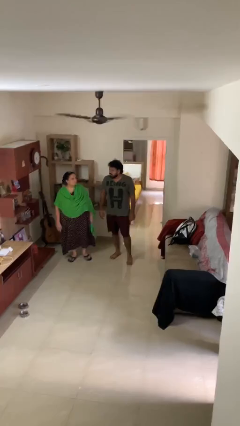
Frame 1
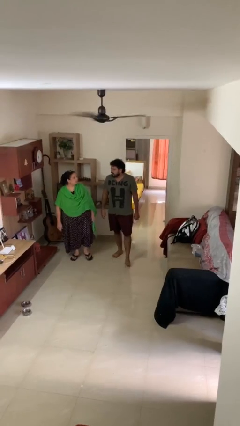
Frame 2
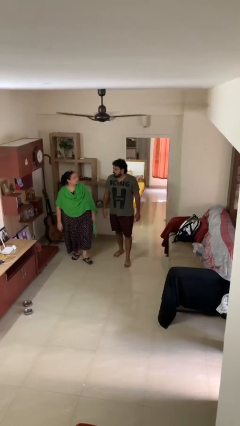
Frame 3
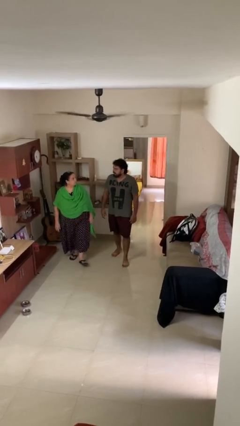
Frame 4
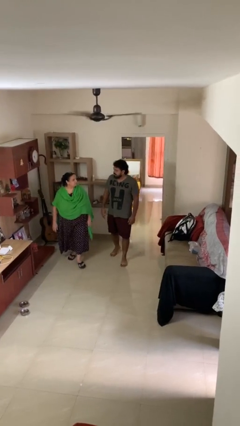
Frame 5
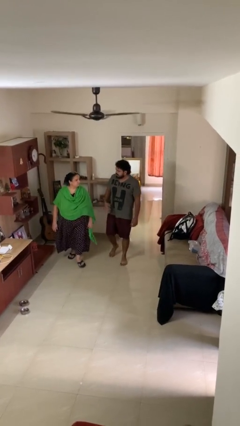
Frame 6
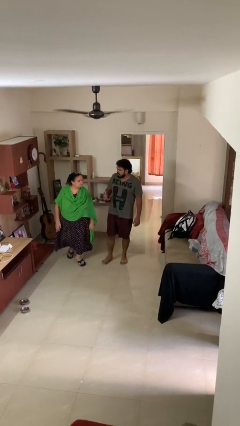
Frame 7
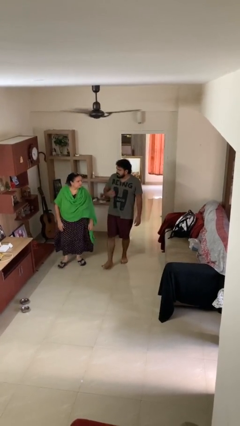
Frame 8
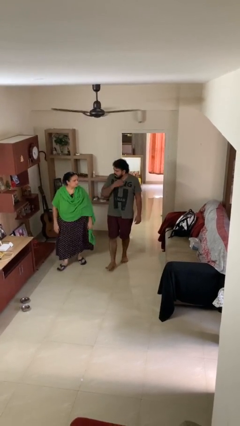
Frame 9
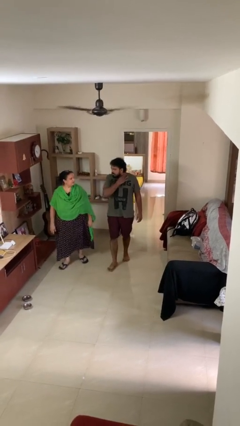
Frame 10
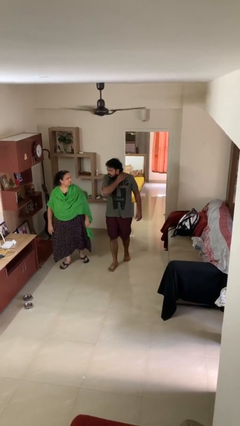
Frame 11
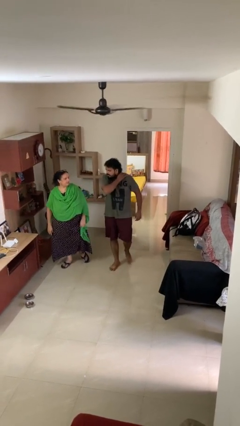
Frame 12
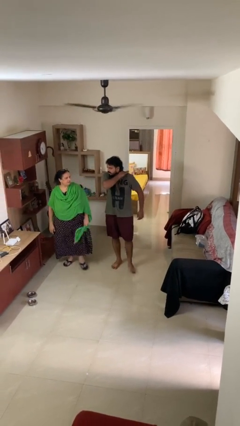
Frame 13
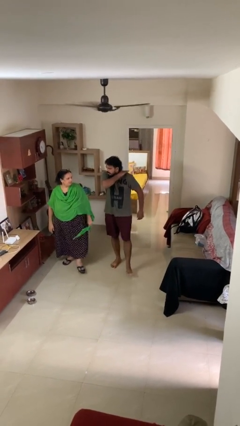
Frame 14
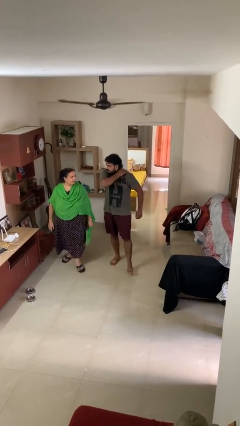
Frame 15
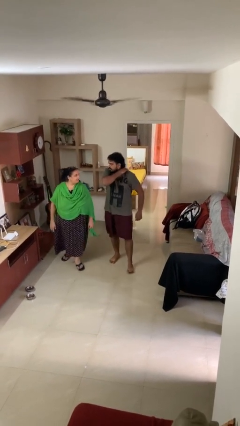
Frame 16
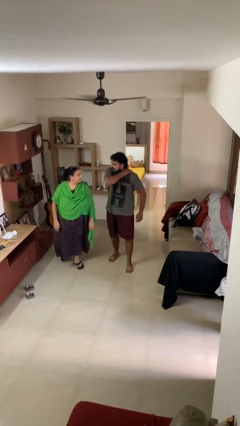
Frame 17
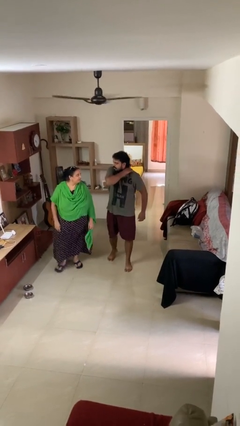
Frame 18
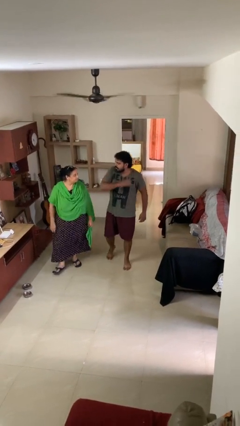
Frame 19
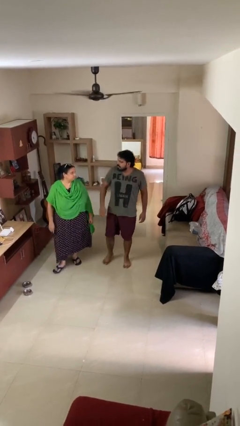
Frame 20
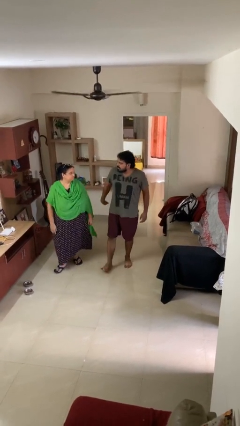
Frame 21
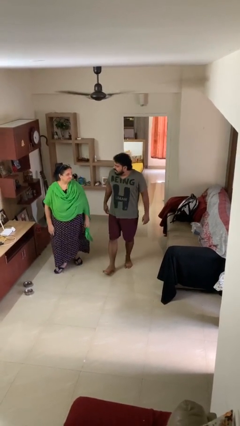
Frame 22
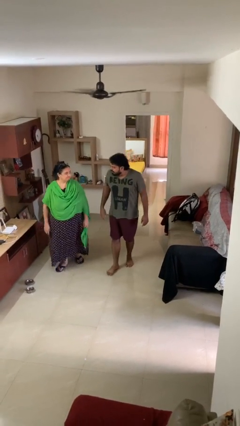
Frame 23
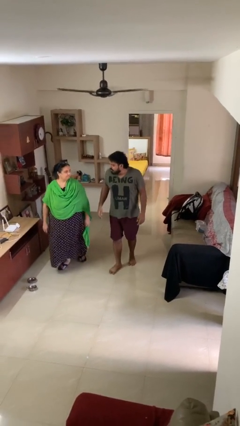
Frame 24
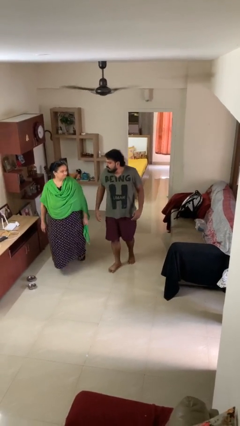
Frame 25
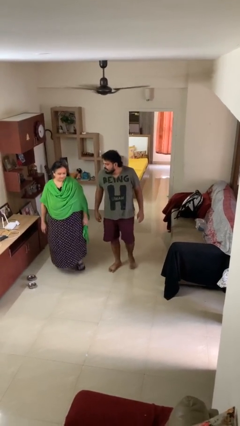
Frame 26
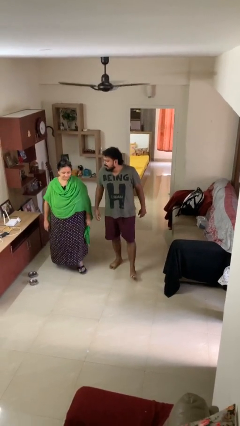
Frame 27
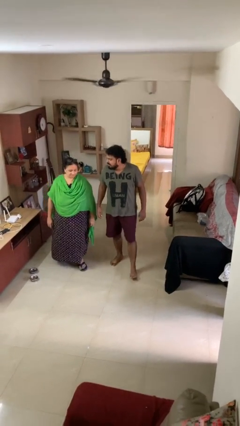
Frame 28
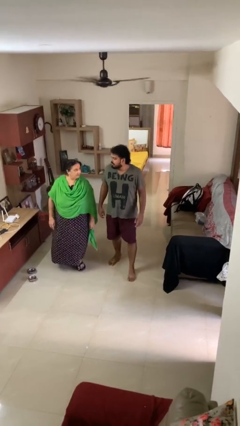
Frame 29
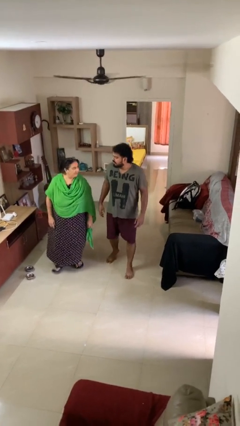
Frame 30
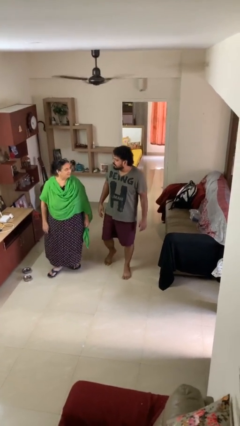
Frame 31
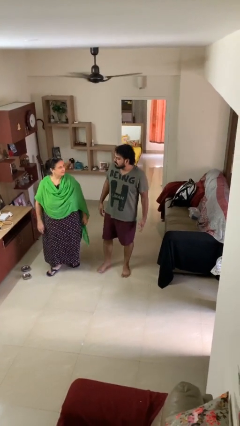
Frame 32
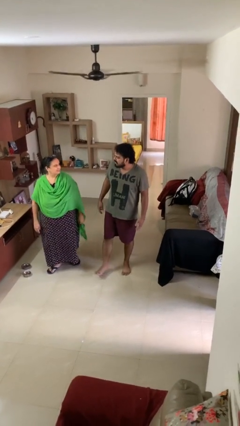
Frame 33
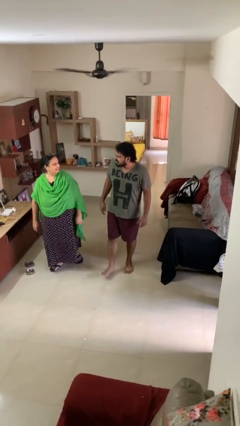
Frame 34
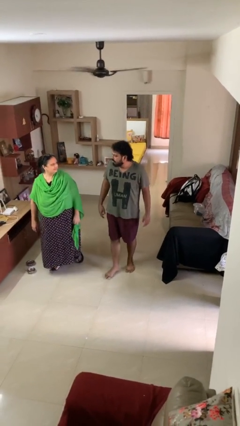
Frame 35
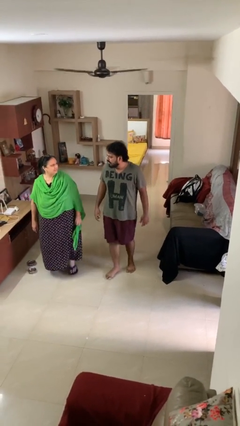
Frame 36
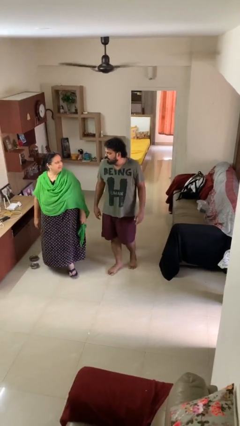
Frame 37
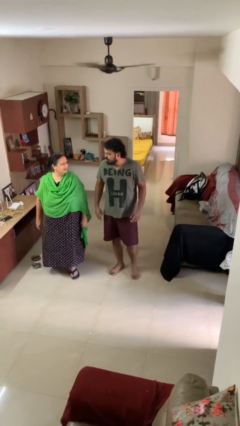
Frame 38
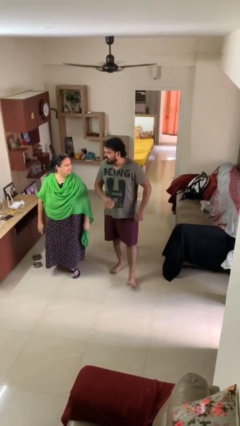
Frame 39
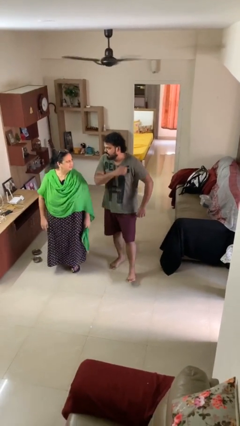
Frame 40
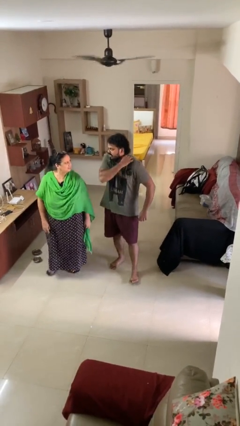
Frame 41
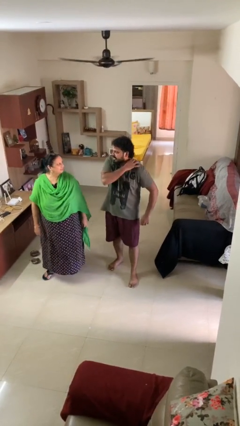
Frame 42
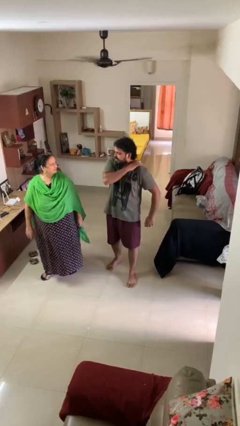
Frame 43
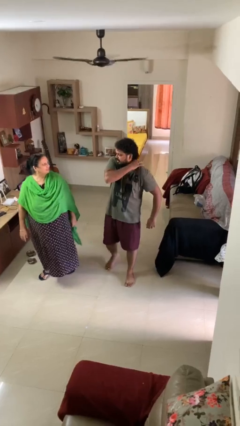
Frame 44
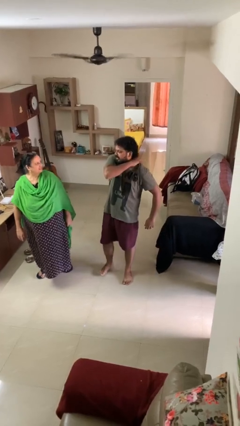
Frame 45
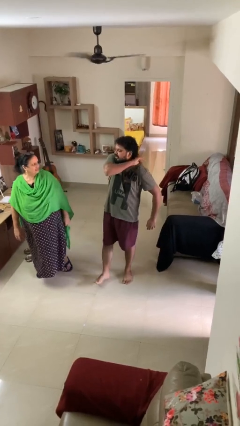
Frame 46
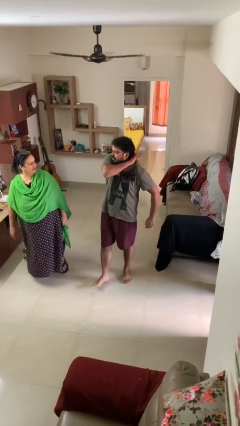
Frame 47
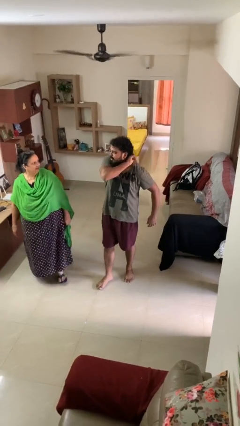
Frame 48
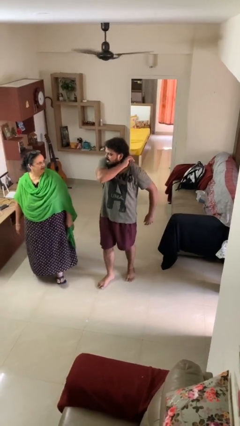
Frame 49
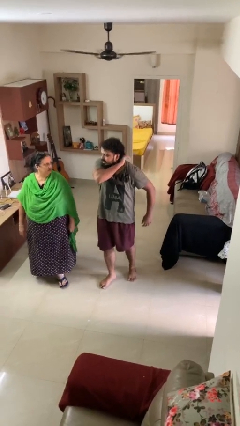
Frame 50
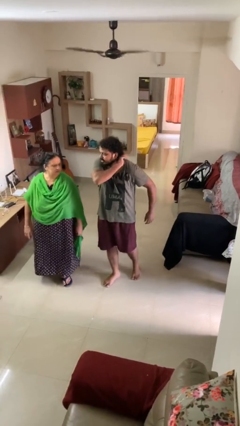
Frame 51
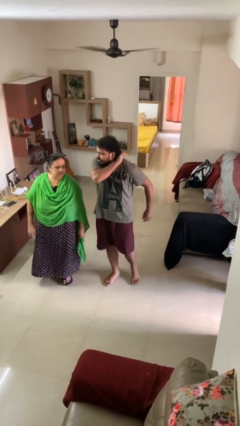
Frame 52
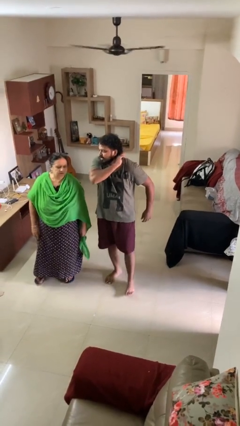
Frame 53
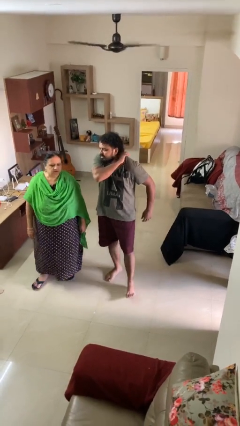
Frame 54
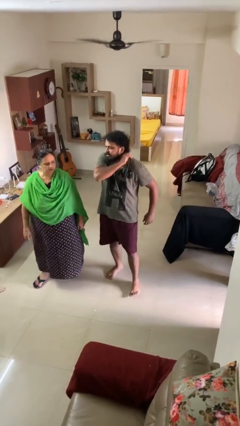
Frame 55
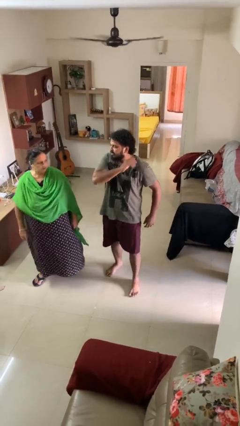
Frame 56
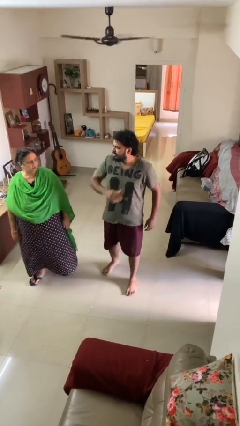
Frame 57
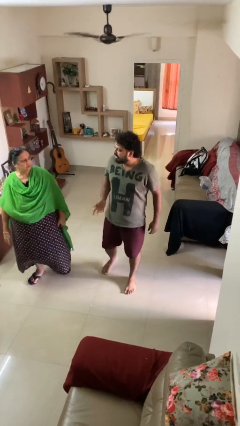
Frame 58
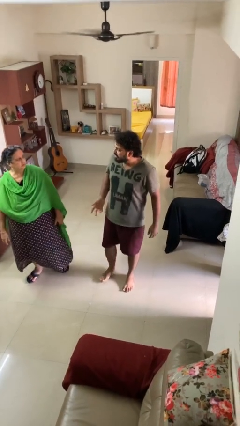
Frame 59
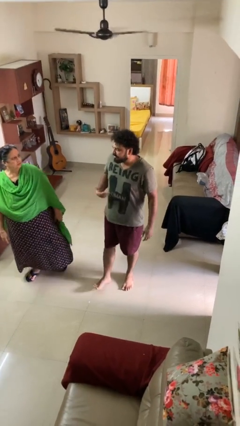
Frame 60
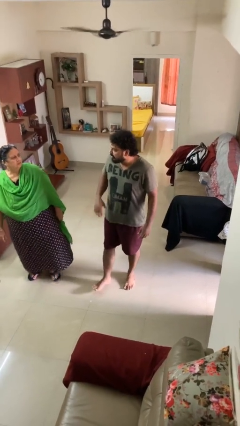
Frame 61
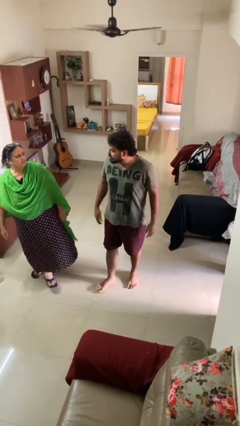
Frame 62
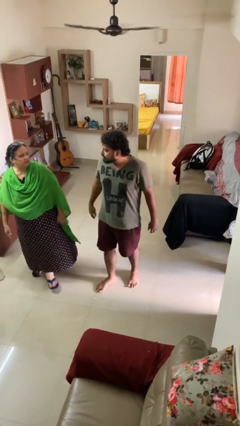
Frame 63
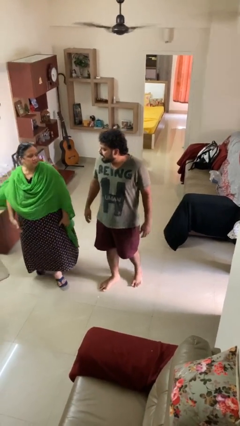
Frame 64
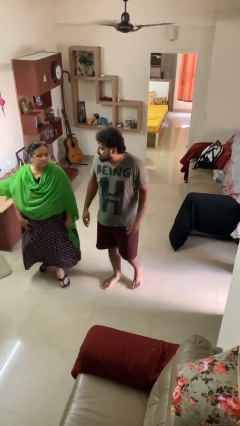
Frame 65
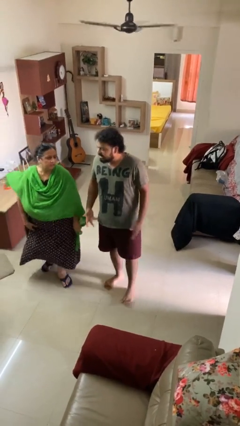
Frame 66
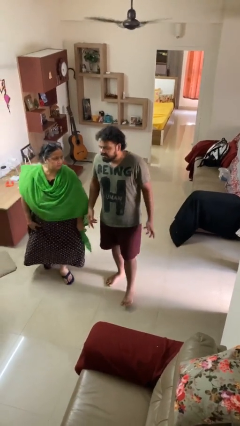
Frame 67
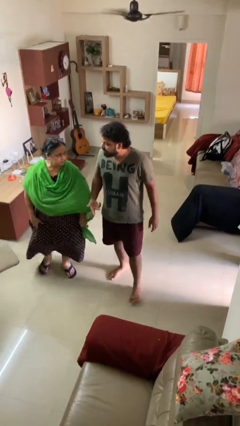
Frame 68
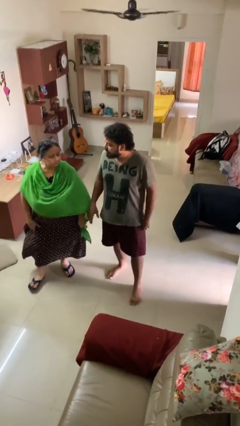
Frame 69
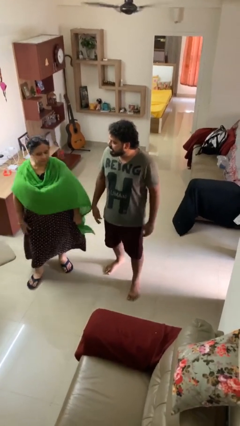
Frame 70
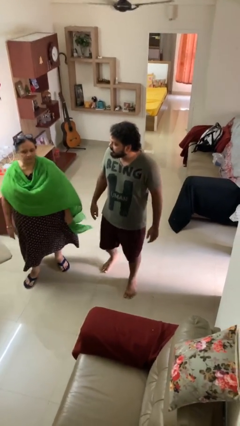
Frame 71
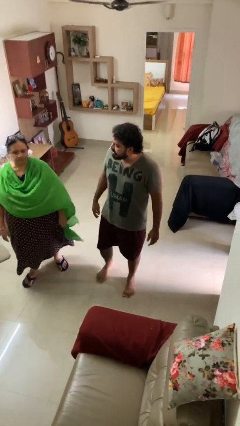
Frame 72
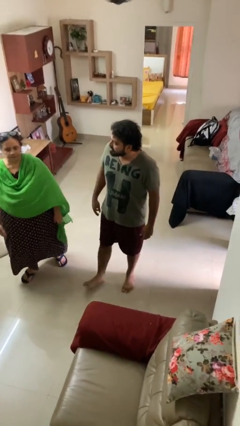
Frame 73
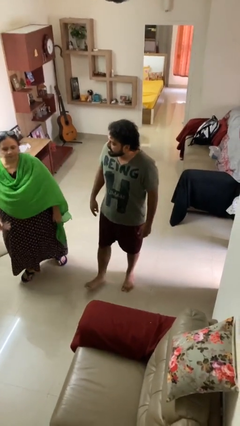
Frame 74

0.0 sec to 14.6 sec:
person talks to person

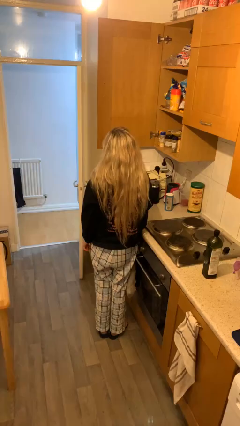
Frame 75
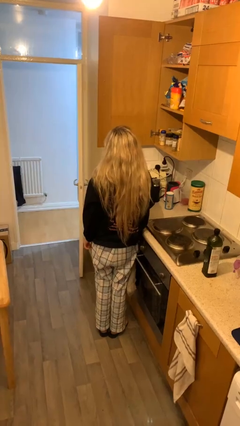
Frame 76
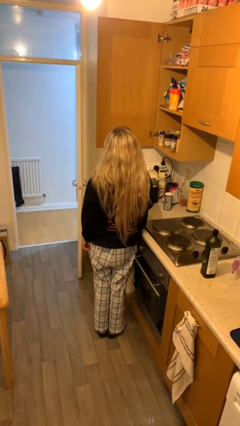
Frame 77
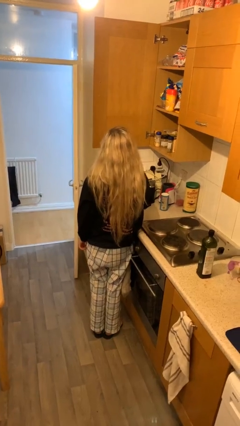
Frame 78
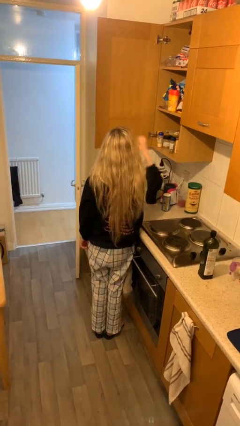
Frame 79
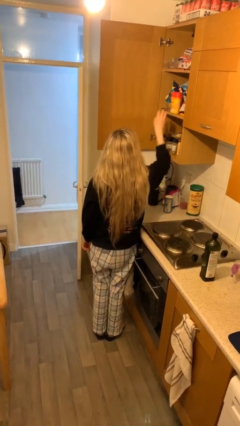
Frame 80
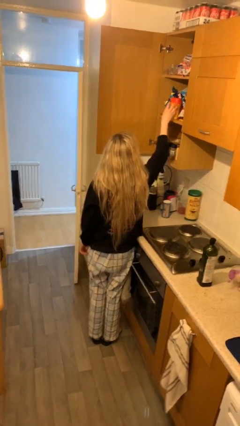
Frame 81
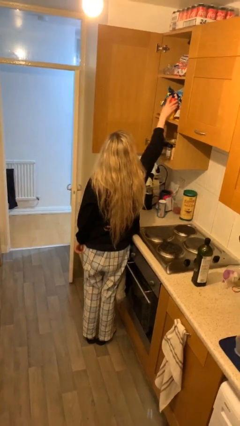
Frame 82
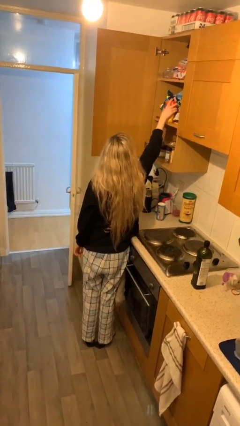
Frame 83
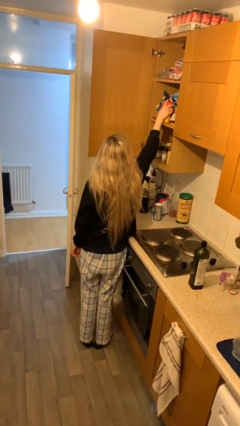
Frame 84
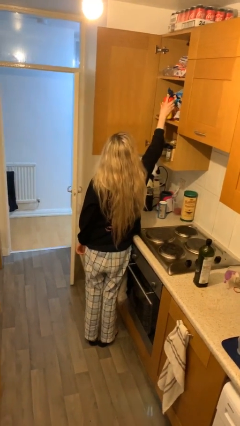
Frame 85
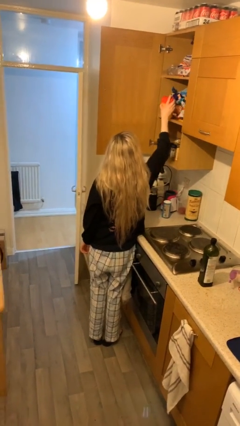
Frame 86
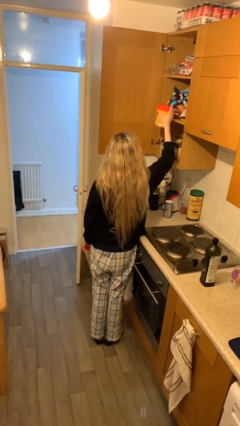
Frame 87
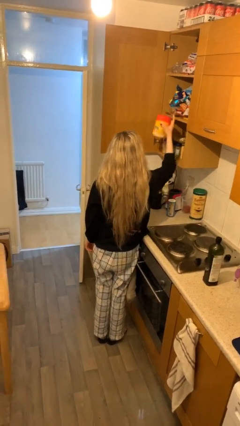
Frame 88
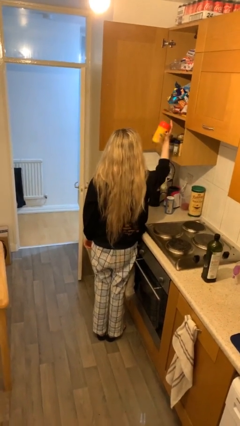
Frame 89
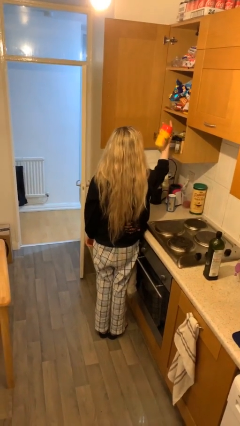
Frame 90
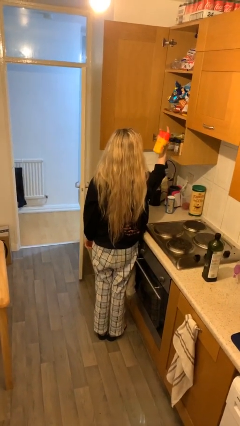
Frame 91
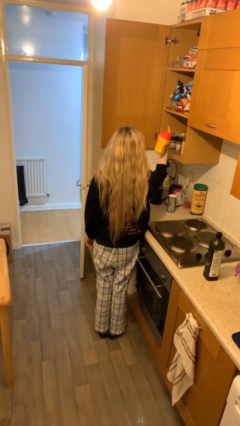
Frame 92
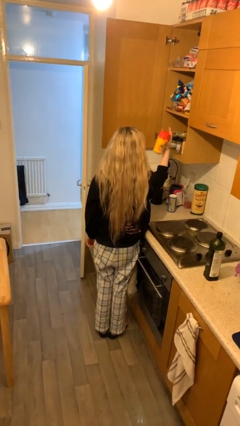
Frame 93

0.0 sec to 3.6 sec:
person picks up object from shelf
